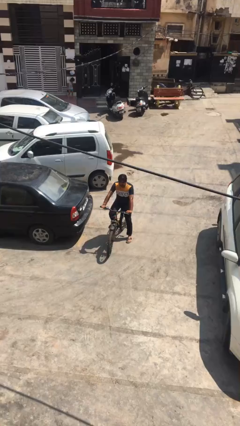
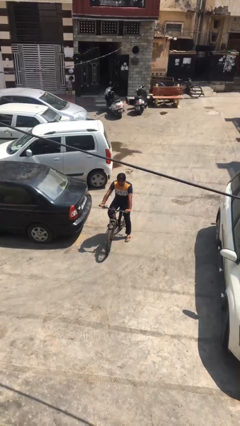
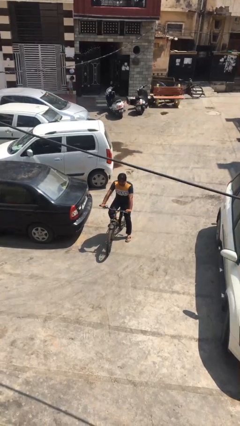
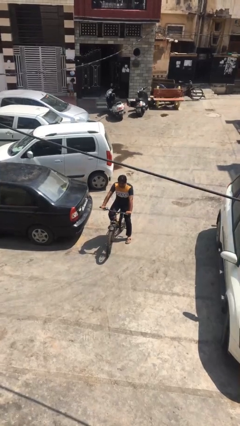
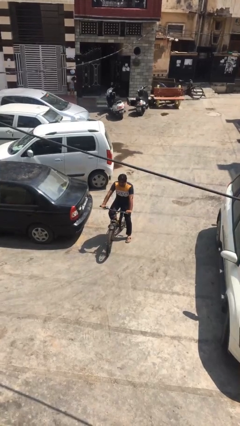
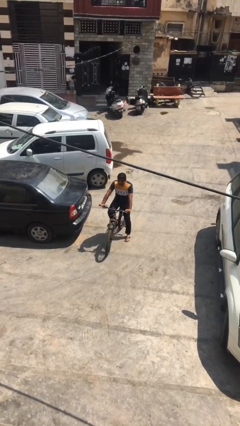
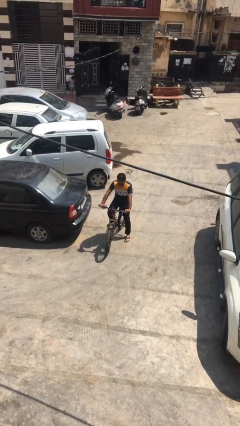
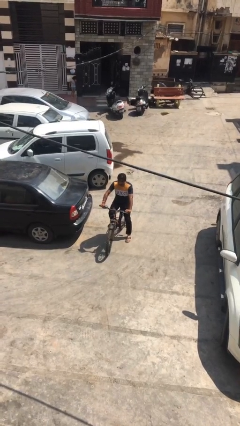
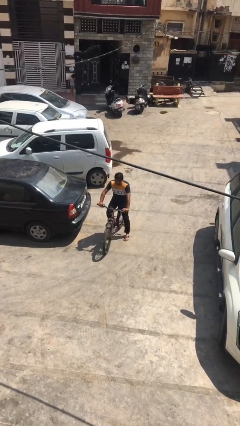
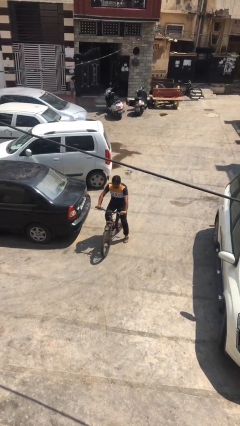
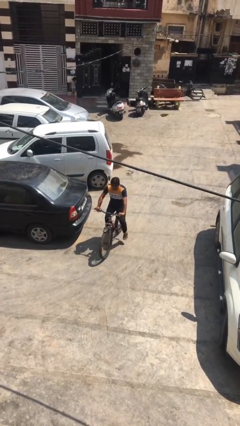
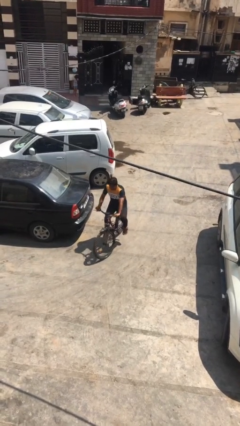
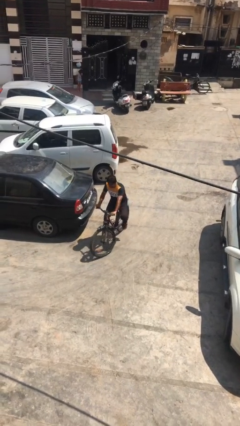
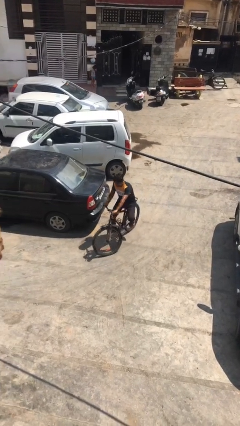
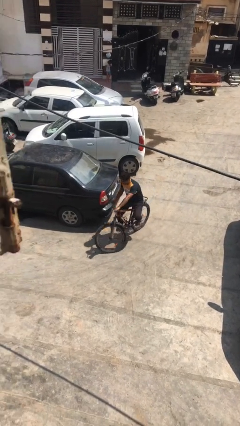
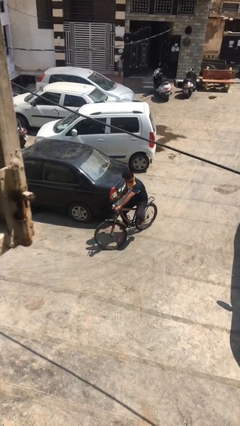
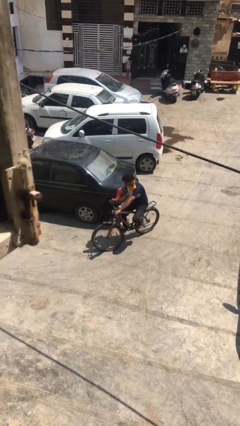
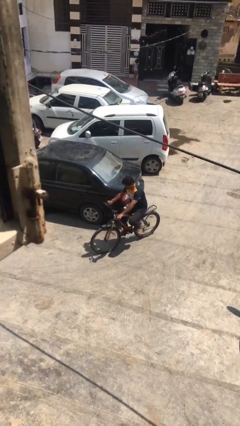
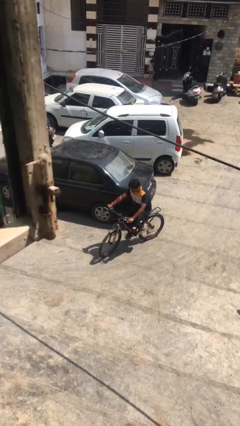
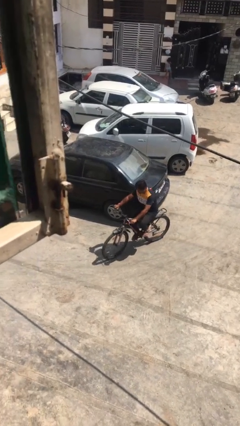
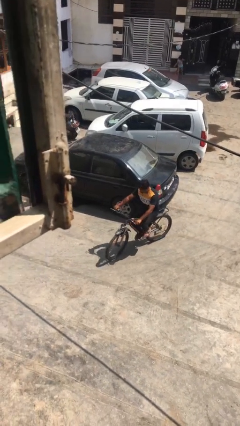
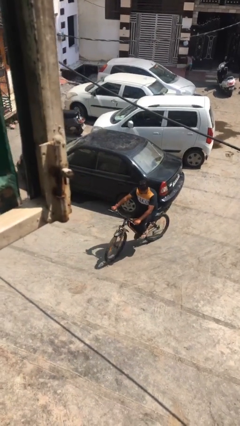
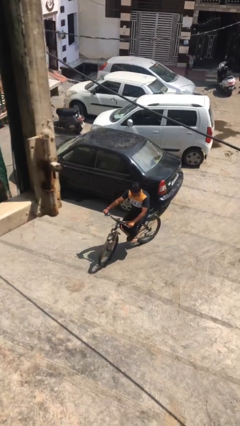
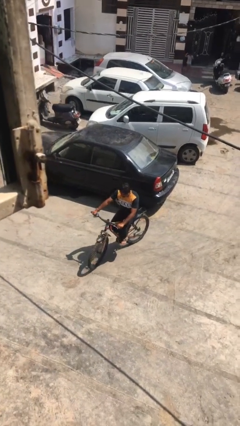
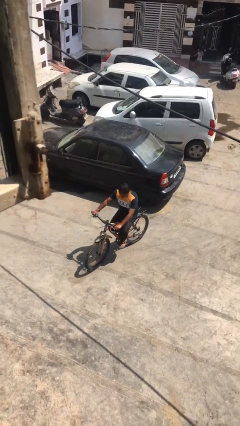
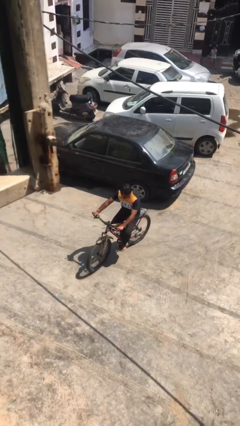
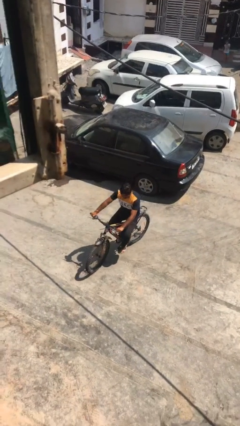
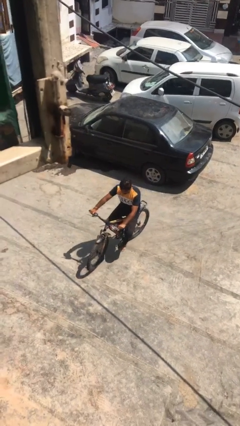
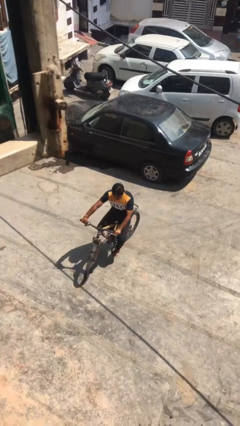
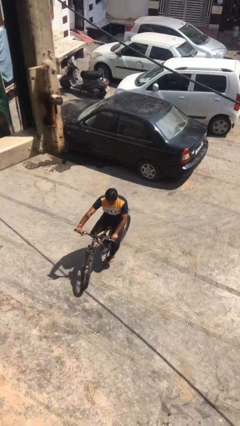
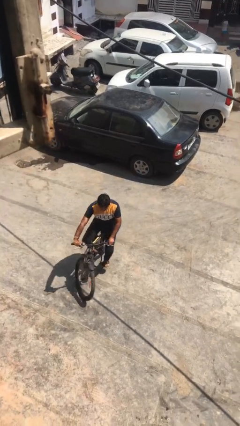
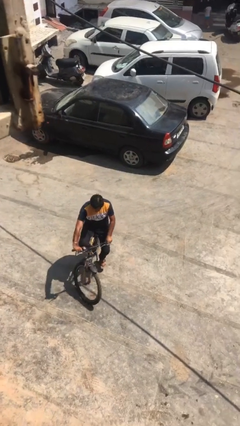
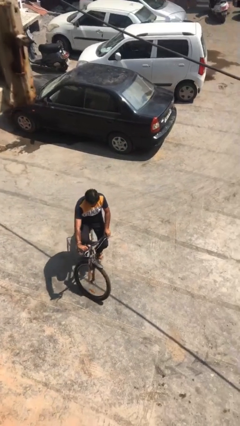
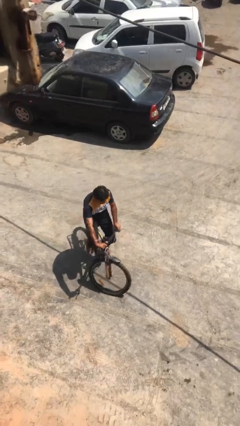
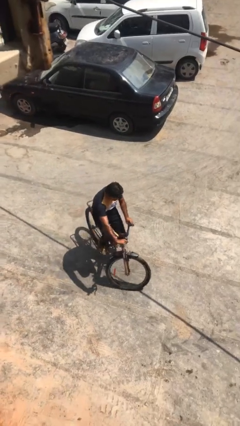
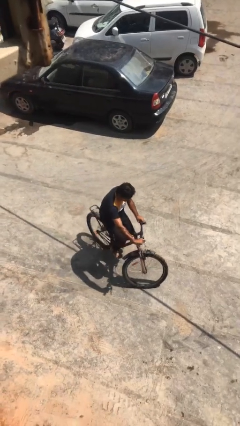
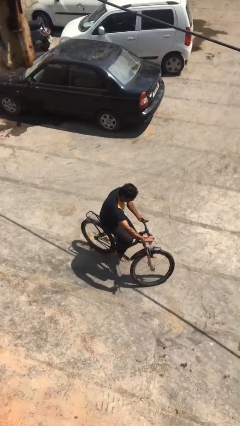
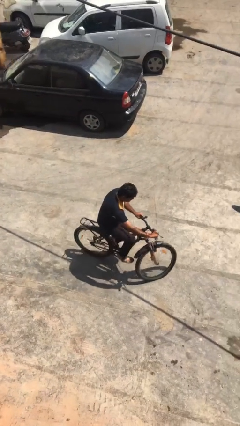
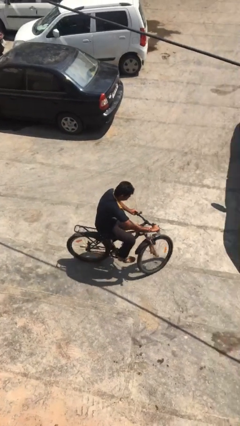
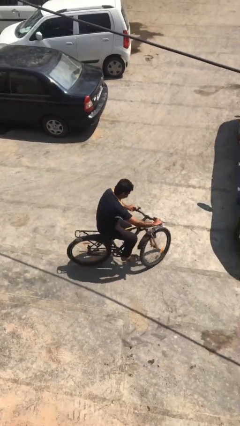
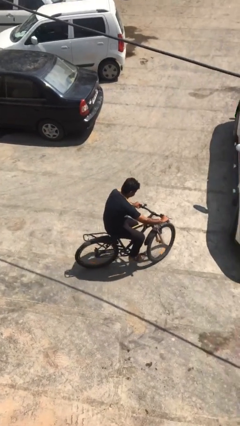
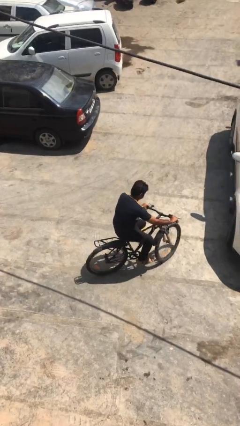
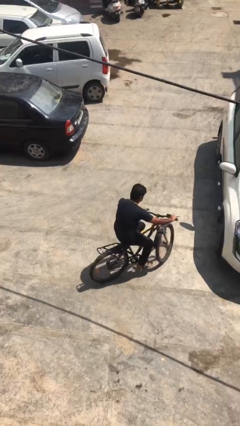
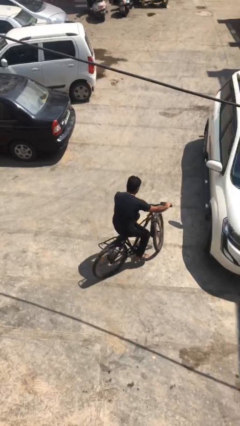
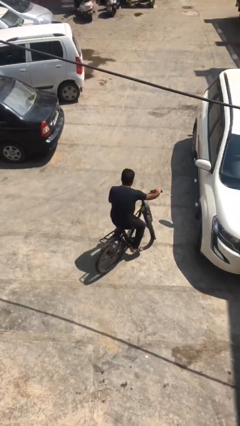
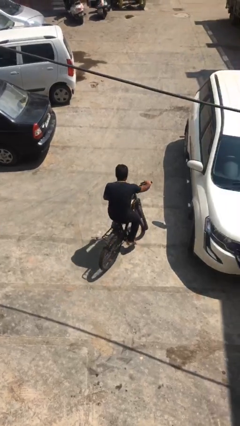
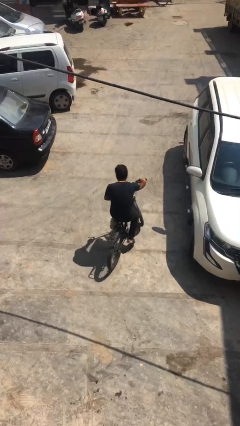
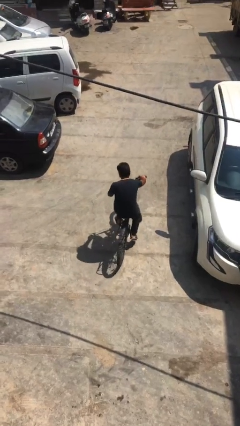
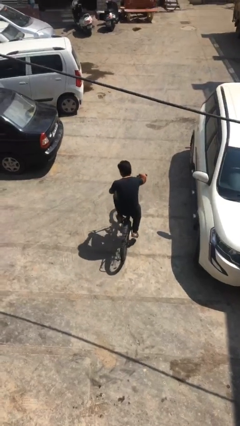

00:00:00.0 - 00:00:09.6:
person rides bicycle

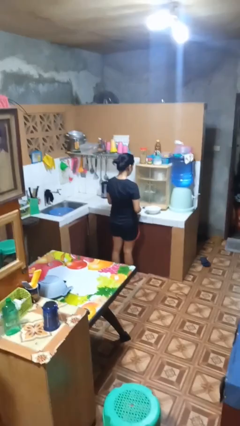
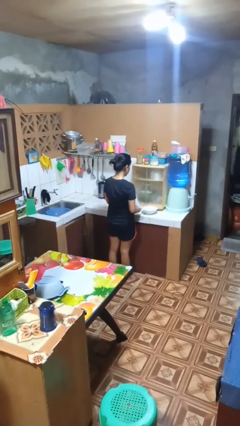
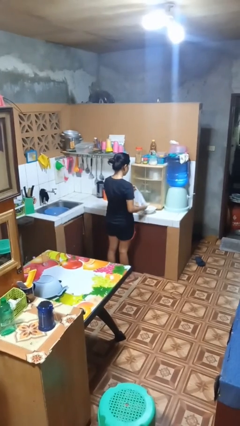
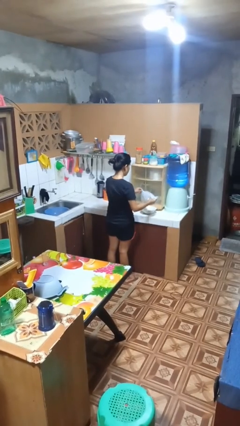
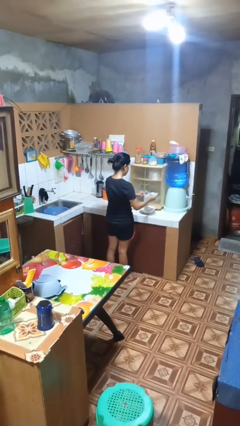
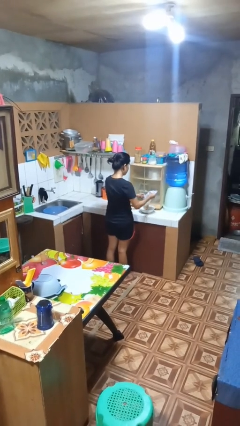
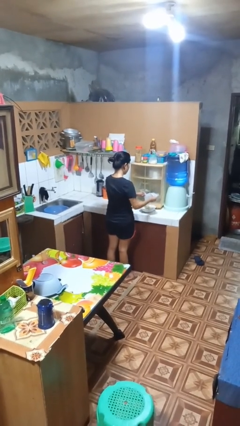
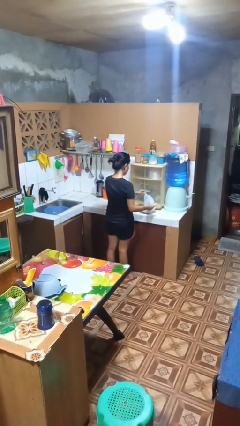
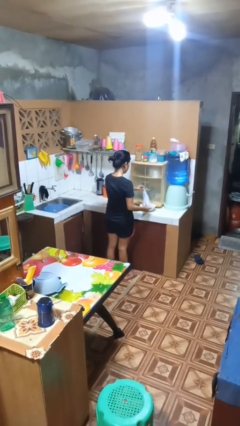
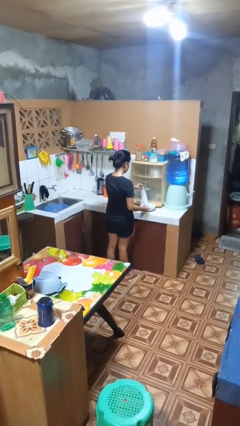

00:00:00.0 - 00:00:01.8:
person pours into bowl

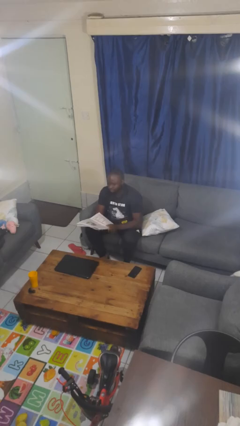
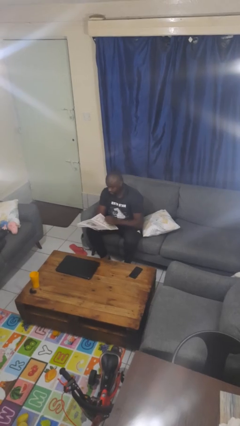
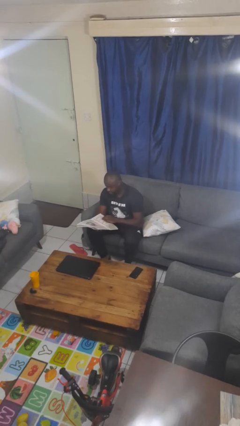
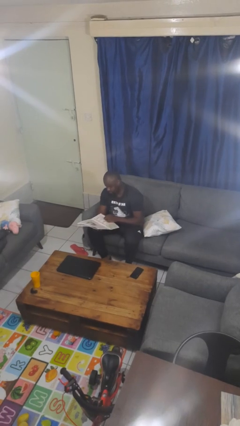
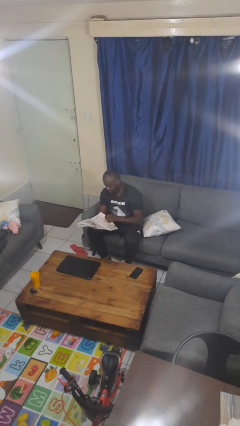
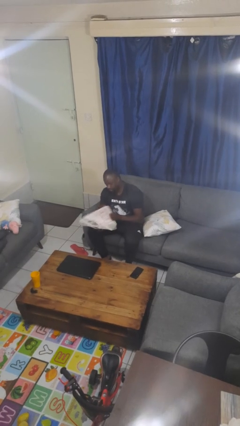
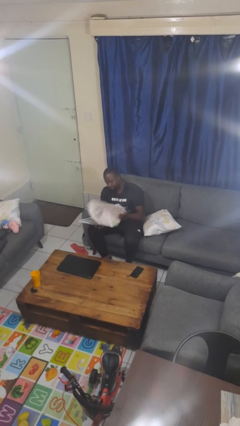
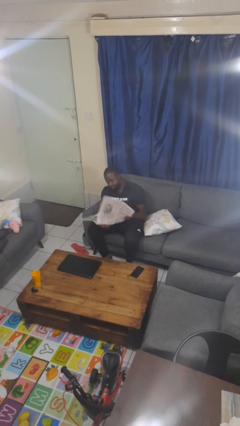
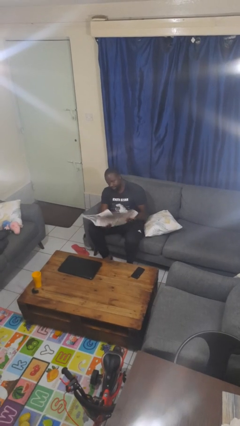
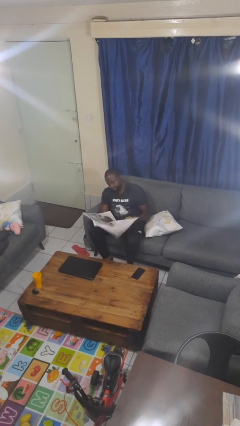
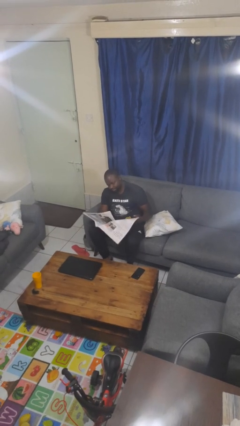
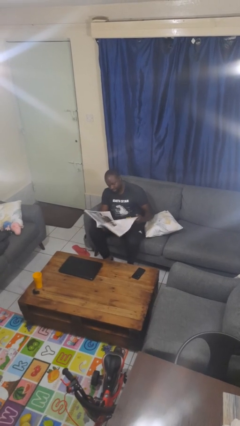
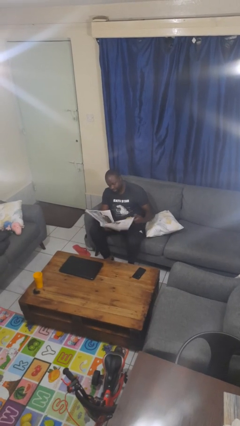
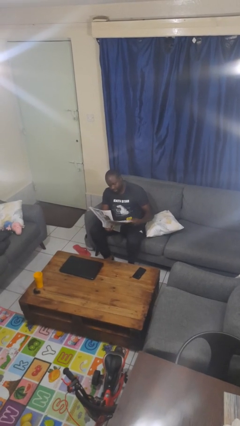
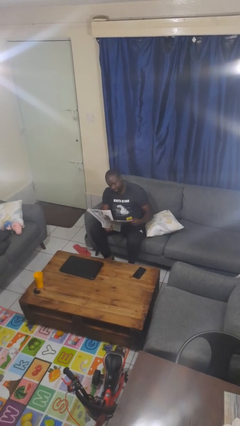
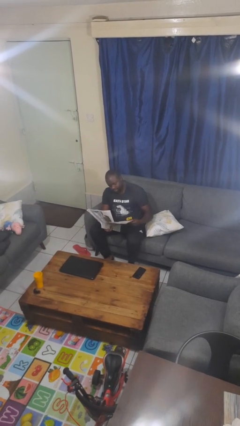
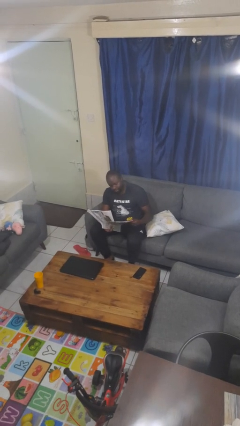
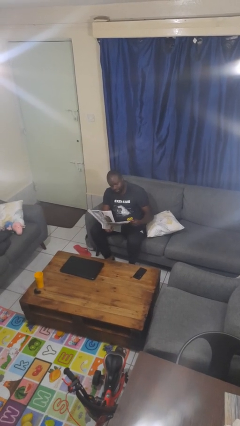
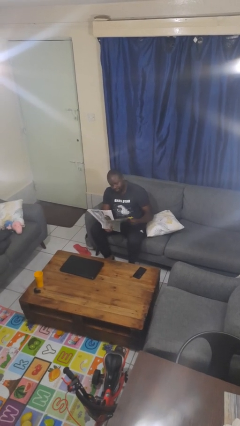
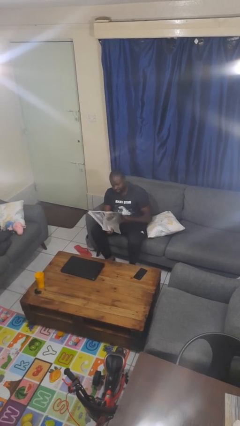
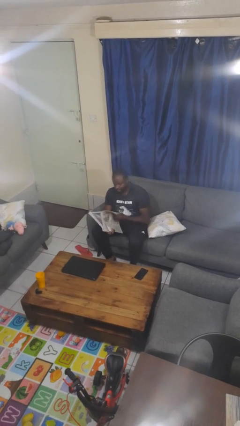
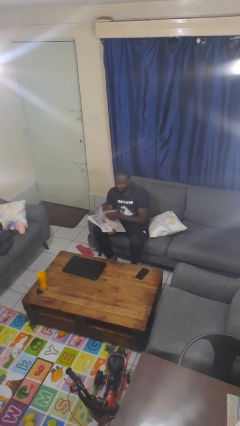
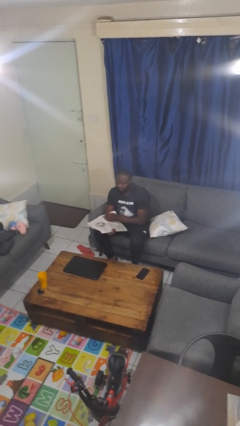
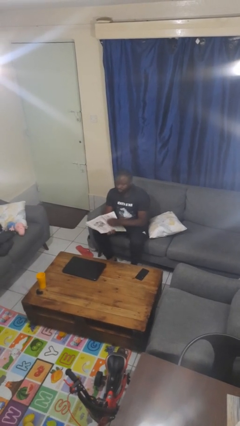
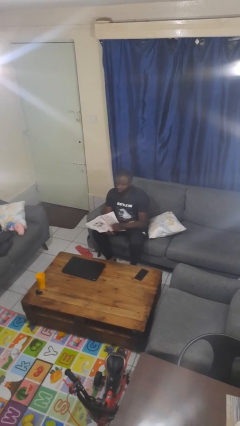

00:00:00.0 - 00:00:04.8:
person reads newspaper

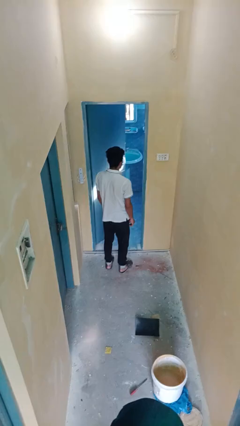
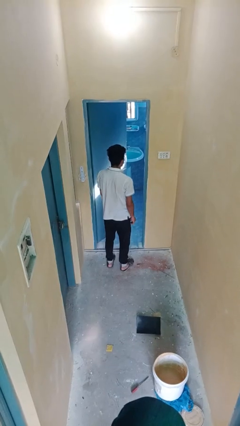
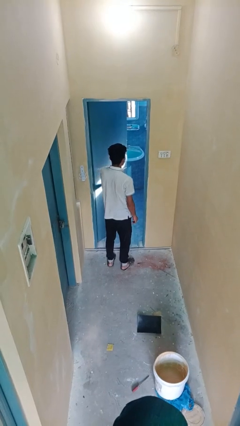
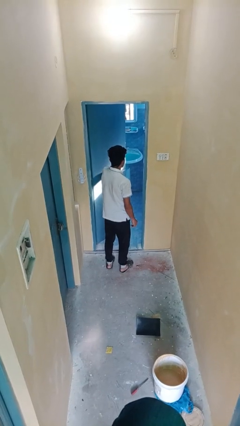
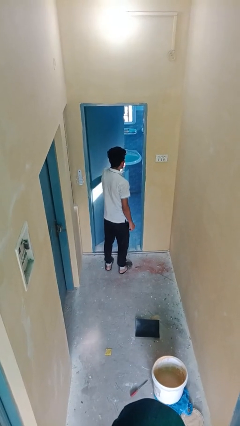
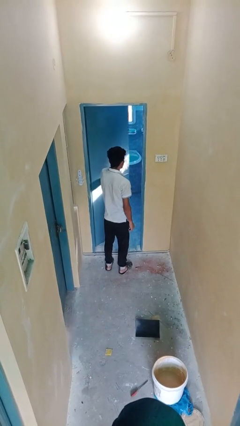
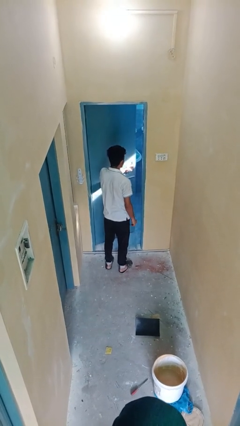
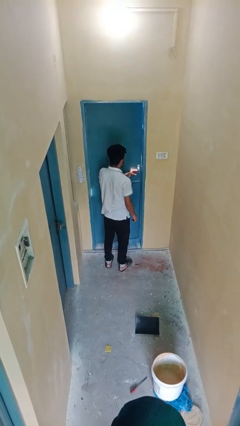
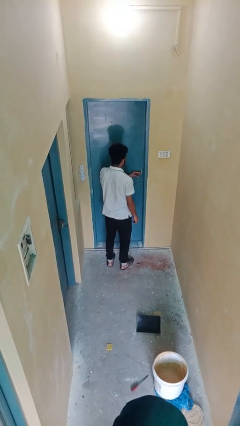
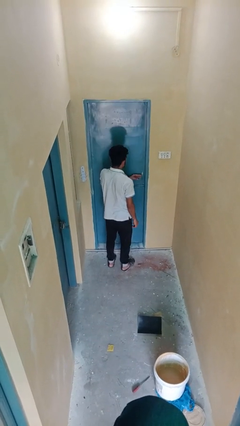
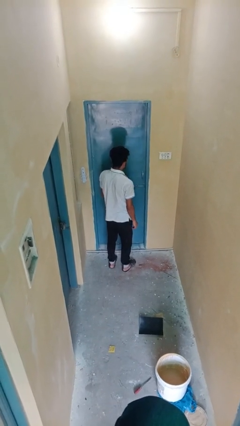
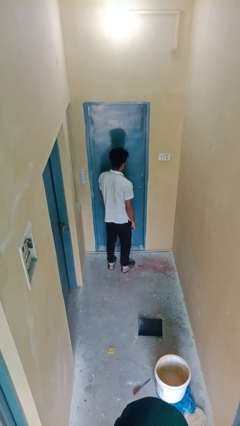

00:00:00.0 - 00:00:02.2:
person closes facility door
